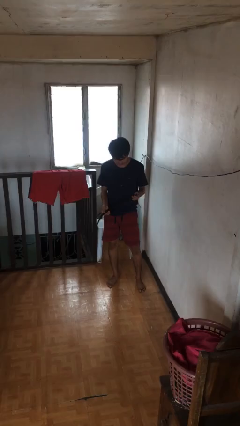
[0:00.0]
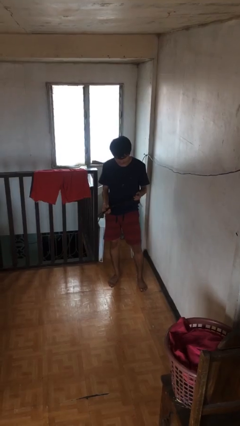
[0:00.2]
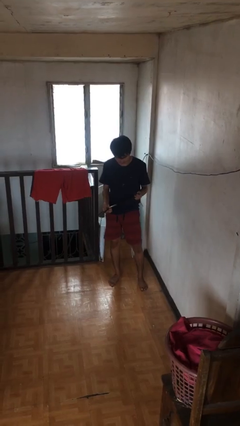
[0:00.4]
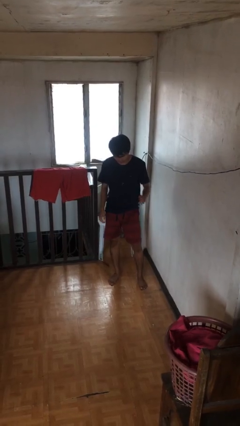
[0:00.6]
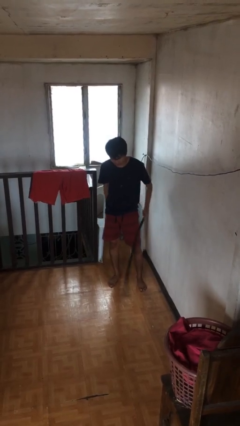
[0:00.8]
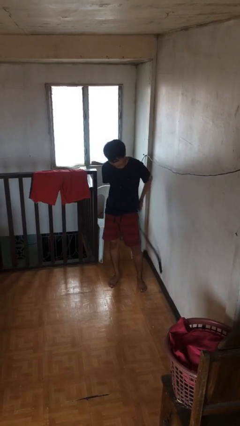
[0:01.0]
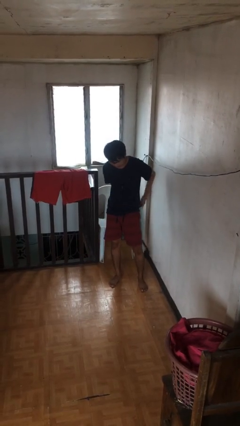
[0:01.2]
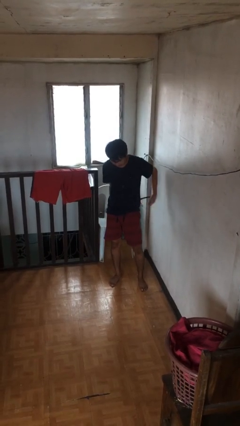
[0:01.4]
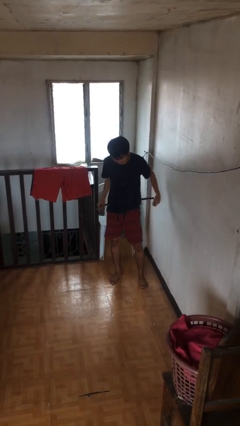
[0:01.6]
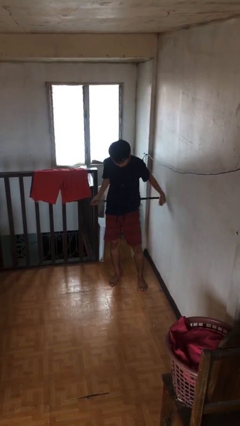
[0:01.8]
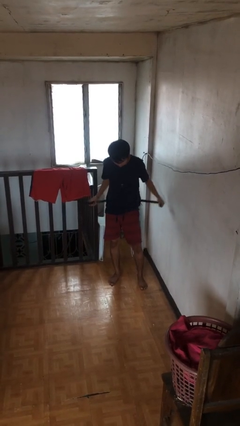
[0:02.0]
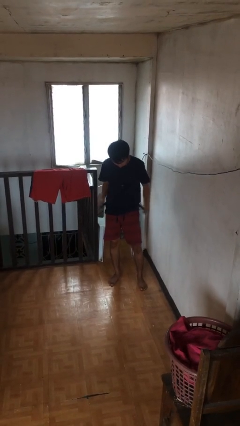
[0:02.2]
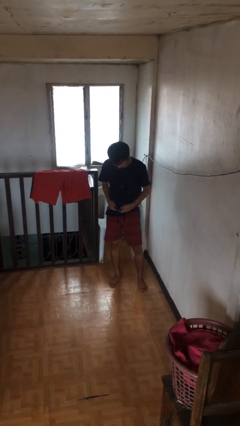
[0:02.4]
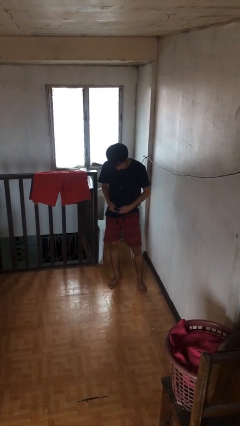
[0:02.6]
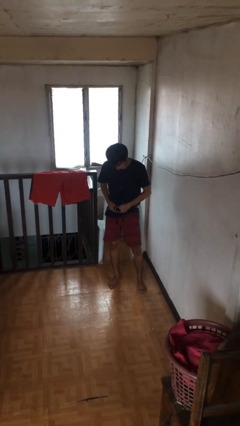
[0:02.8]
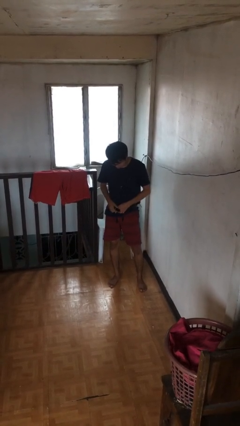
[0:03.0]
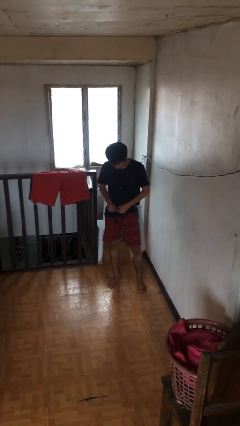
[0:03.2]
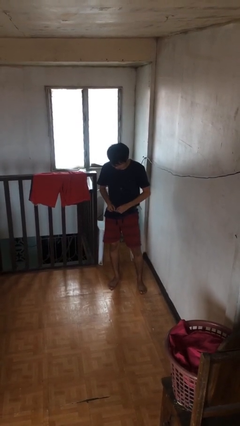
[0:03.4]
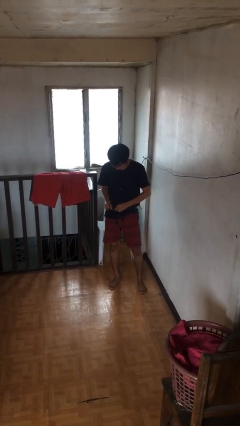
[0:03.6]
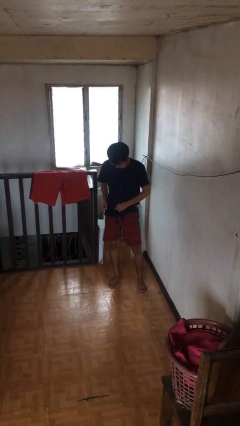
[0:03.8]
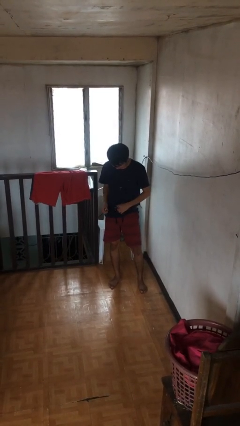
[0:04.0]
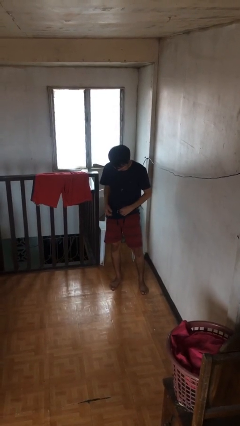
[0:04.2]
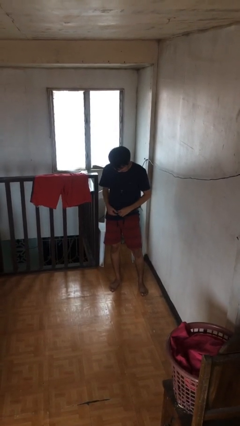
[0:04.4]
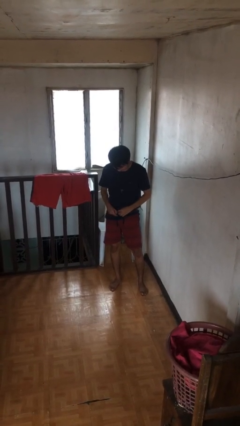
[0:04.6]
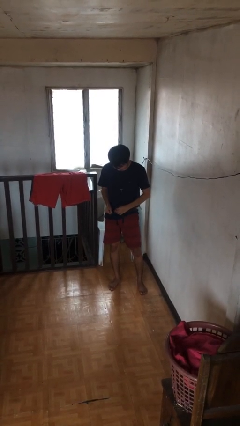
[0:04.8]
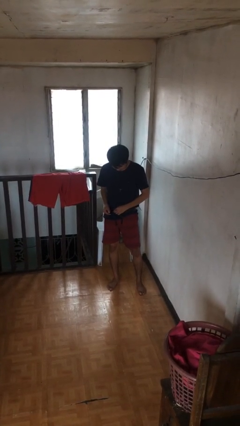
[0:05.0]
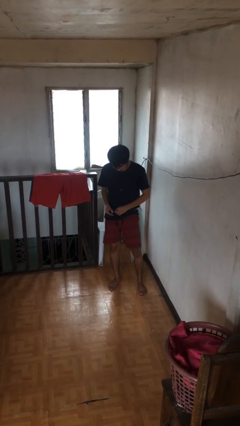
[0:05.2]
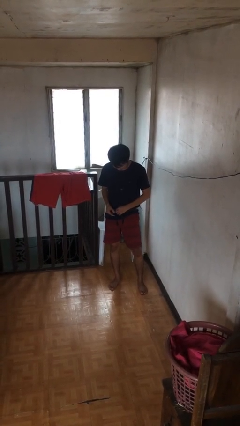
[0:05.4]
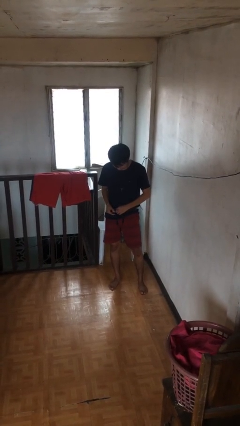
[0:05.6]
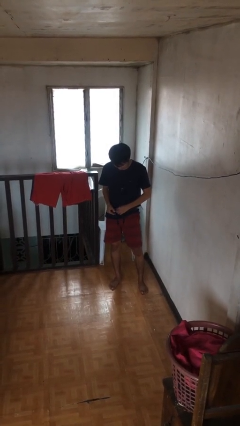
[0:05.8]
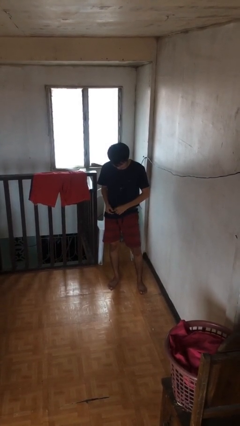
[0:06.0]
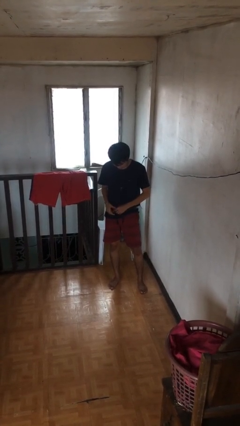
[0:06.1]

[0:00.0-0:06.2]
person puts on belt

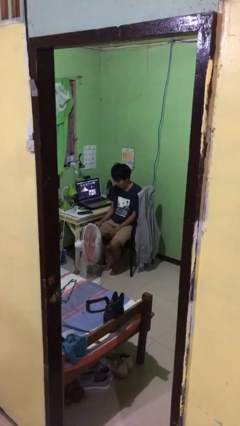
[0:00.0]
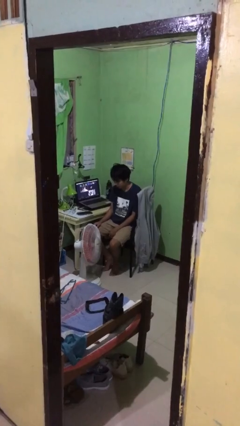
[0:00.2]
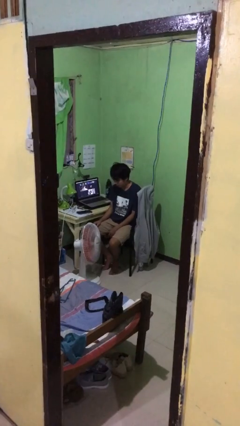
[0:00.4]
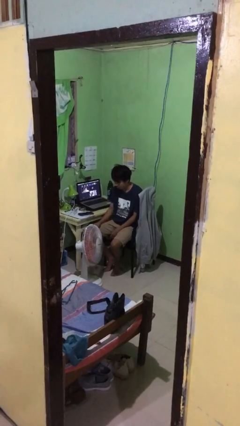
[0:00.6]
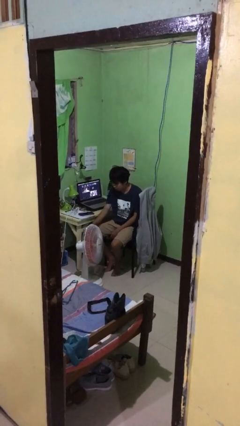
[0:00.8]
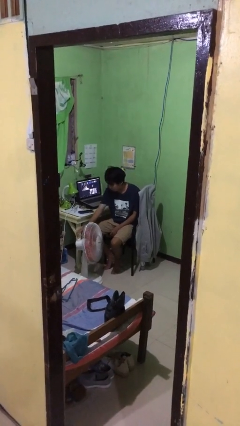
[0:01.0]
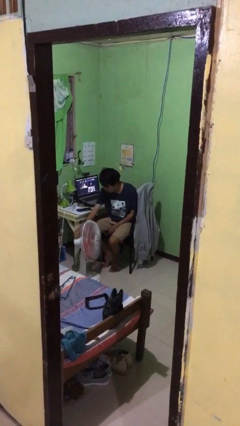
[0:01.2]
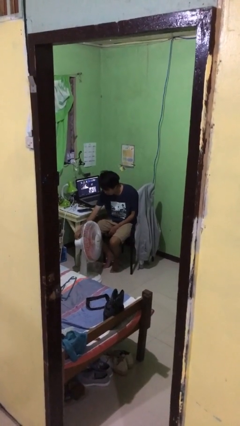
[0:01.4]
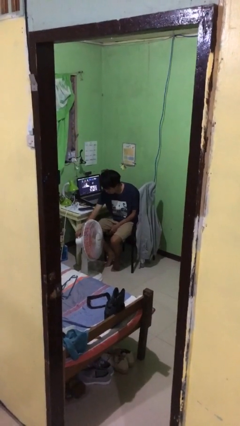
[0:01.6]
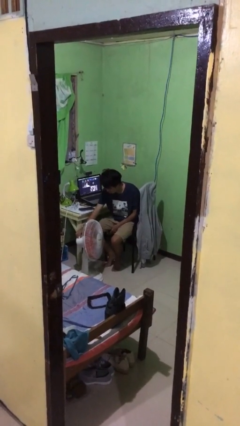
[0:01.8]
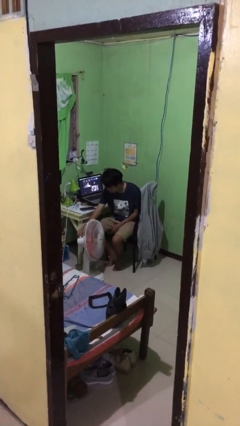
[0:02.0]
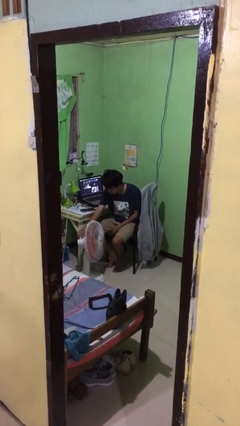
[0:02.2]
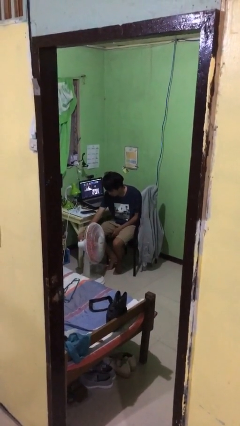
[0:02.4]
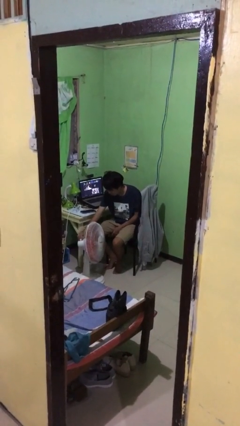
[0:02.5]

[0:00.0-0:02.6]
person turns on fan

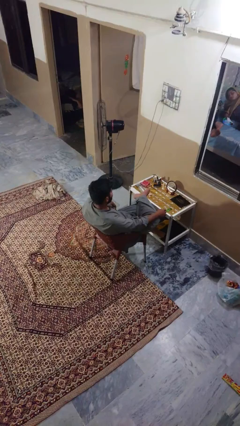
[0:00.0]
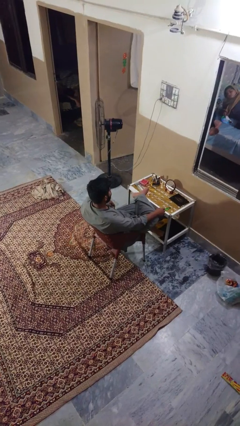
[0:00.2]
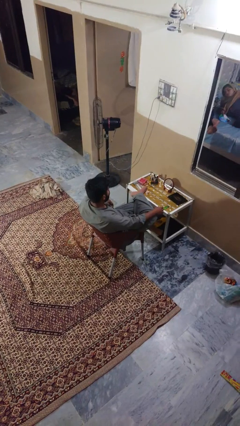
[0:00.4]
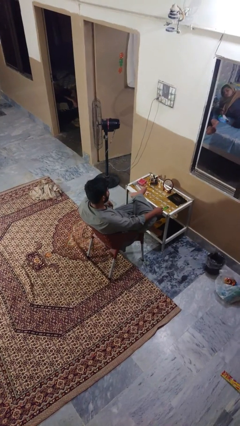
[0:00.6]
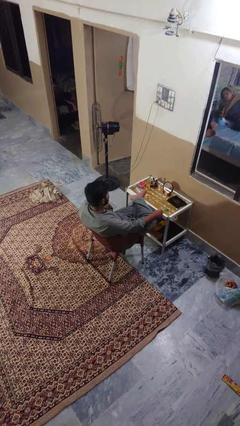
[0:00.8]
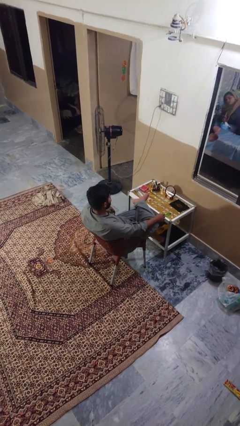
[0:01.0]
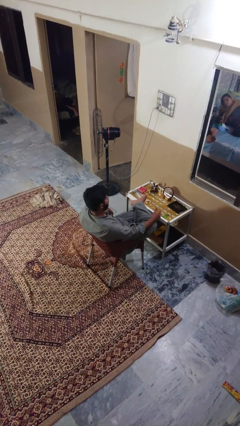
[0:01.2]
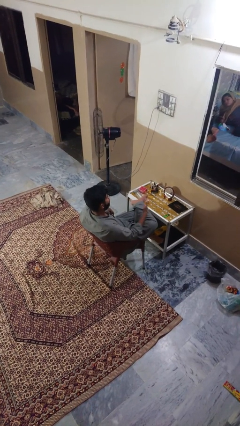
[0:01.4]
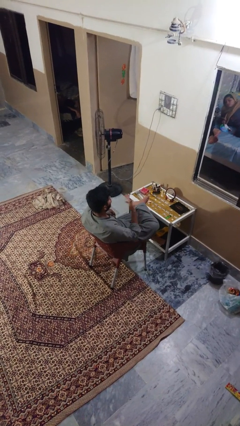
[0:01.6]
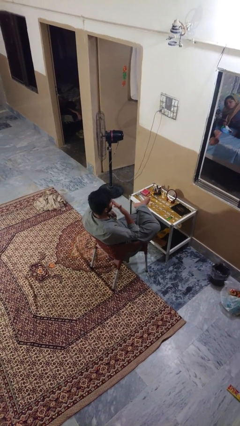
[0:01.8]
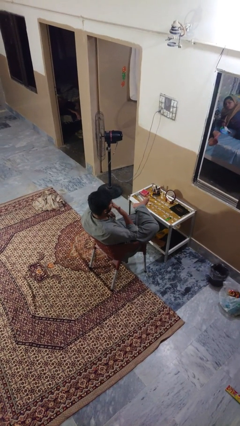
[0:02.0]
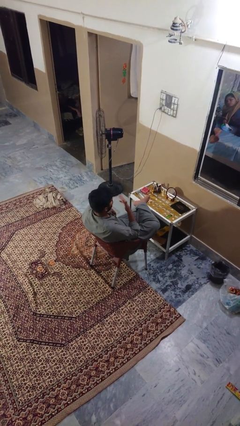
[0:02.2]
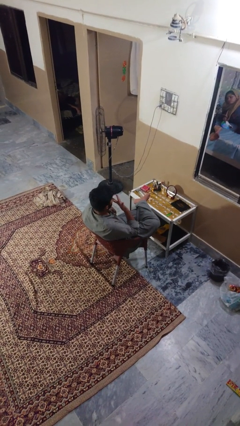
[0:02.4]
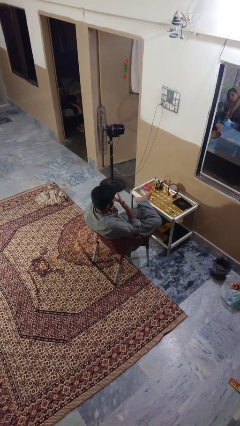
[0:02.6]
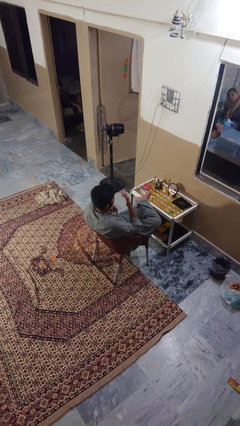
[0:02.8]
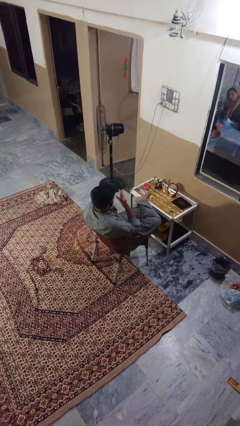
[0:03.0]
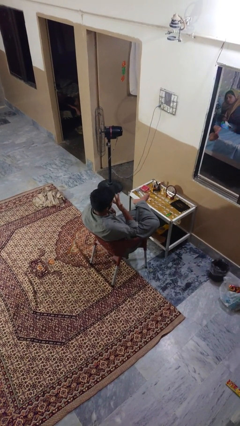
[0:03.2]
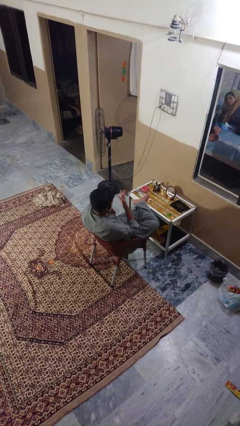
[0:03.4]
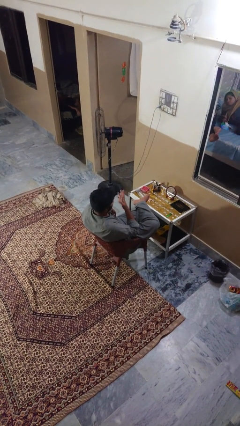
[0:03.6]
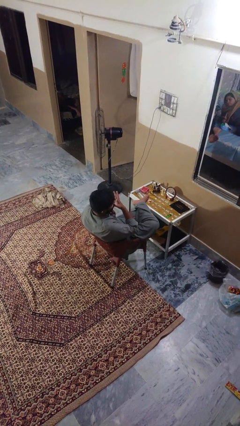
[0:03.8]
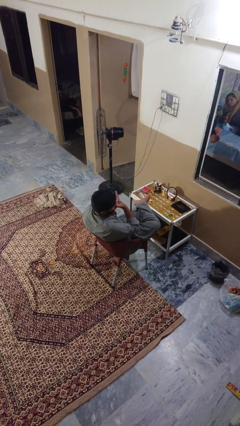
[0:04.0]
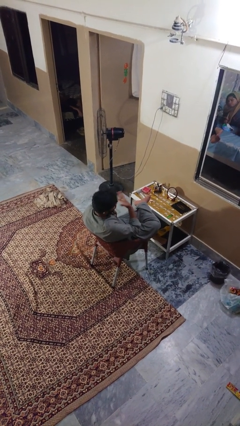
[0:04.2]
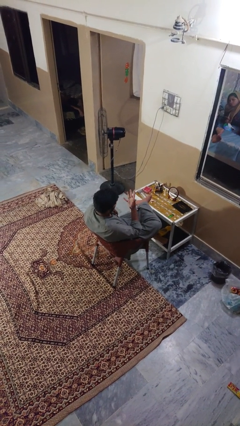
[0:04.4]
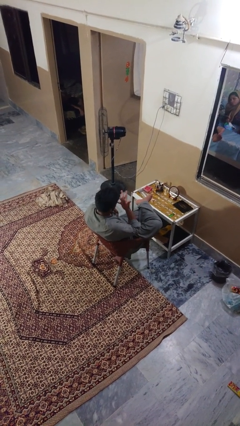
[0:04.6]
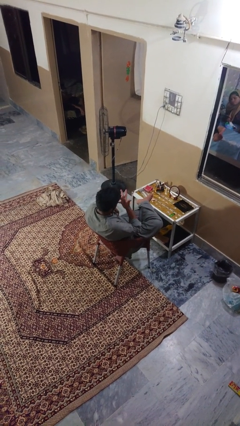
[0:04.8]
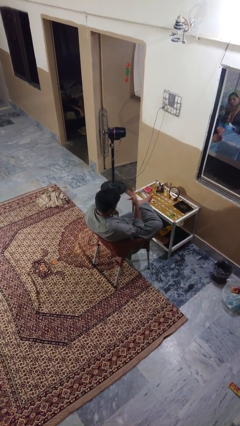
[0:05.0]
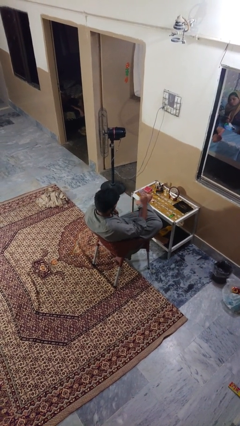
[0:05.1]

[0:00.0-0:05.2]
person licks fingers

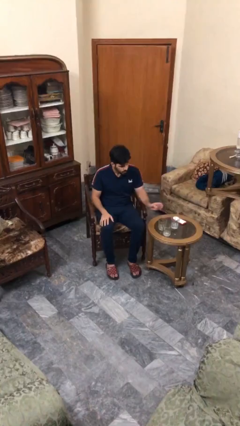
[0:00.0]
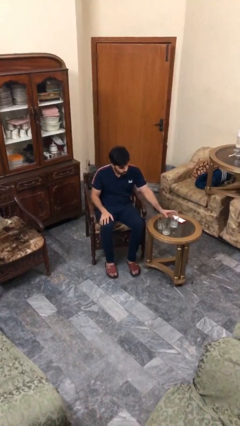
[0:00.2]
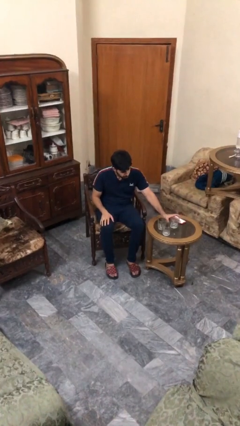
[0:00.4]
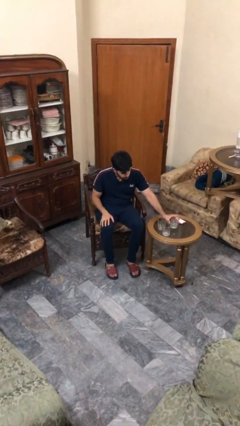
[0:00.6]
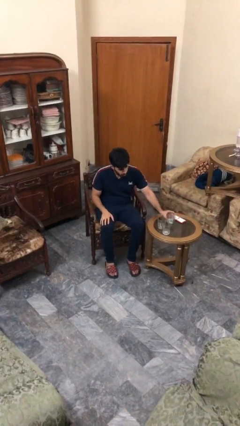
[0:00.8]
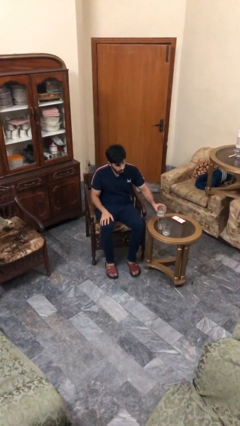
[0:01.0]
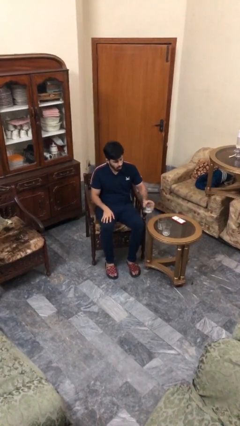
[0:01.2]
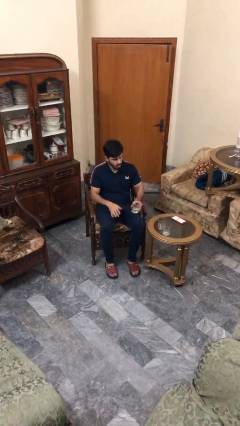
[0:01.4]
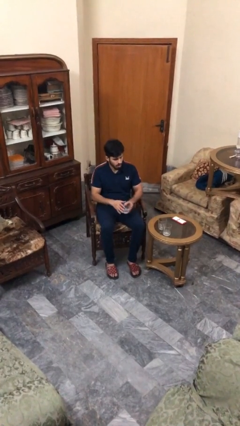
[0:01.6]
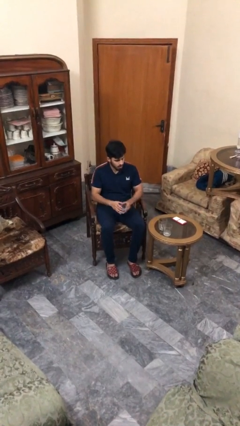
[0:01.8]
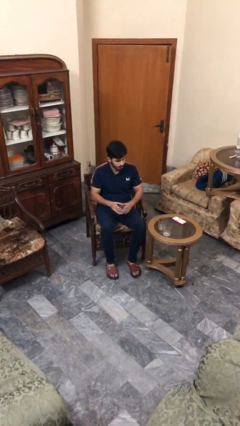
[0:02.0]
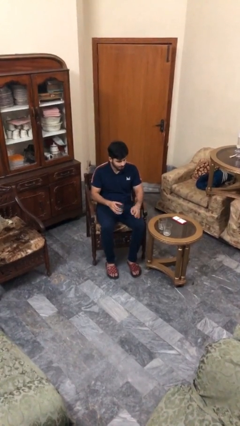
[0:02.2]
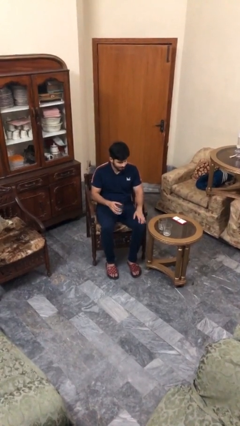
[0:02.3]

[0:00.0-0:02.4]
person picks up object from table

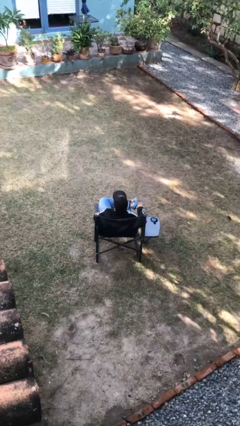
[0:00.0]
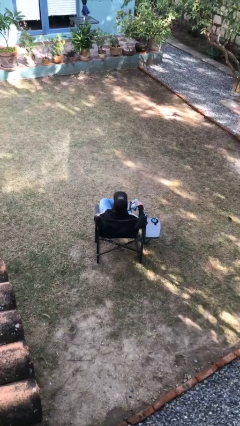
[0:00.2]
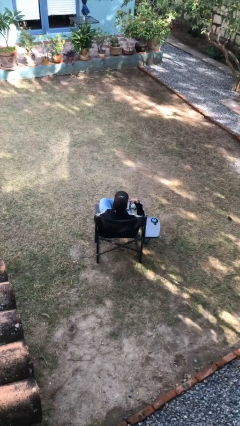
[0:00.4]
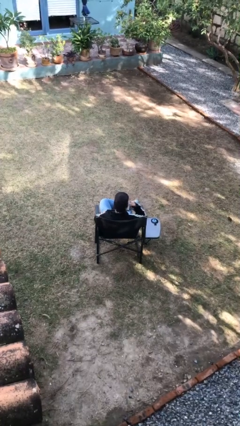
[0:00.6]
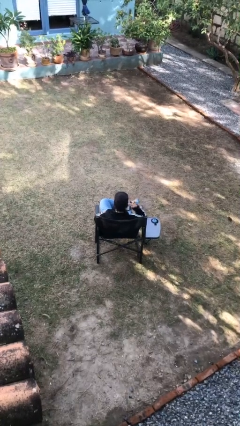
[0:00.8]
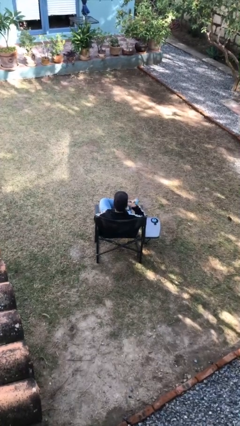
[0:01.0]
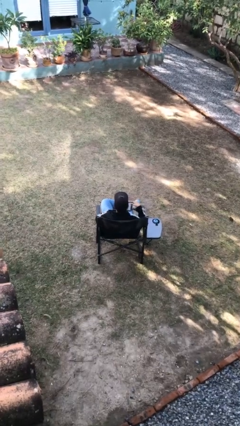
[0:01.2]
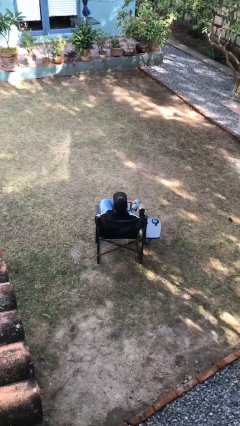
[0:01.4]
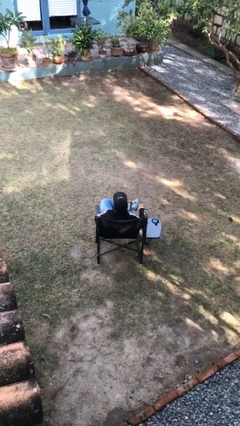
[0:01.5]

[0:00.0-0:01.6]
person gestures call me
